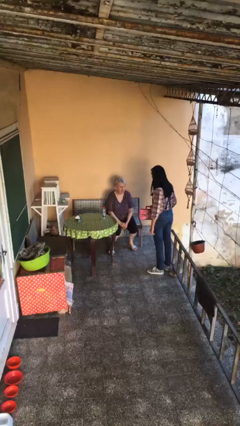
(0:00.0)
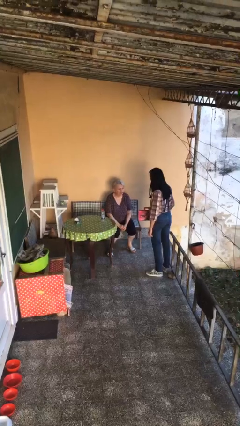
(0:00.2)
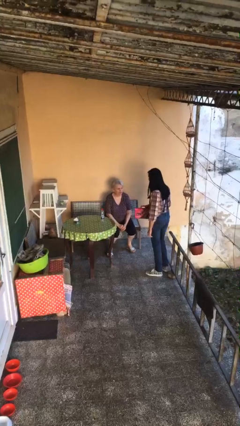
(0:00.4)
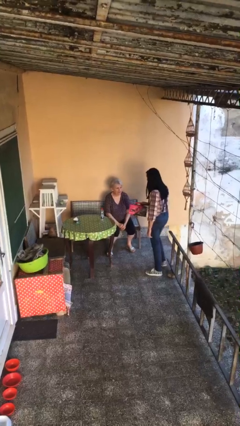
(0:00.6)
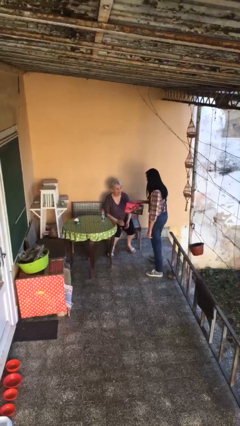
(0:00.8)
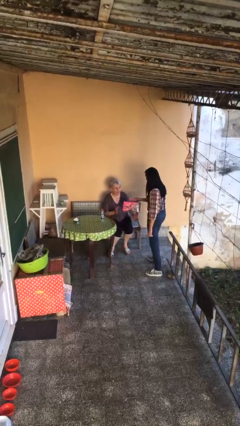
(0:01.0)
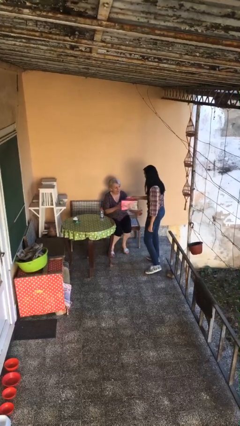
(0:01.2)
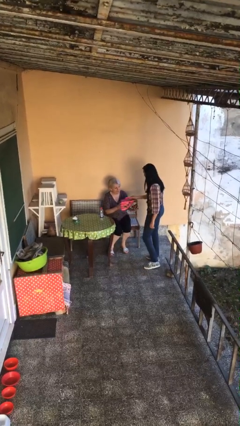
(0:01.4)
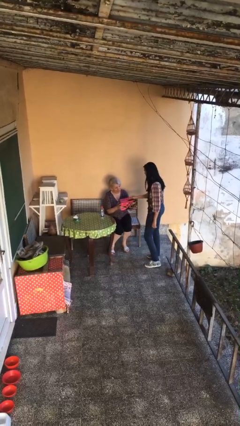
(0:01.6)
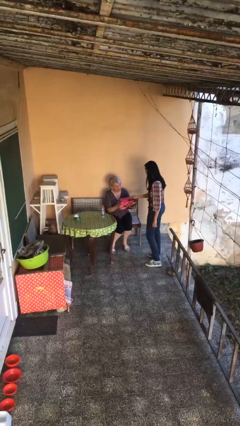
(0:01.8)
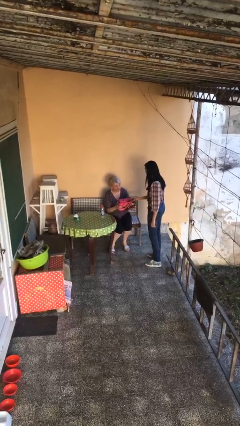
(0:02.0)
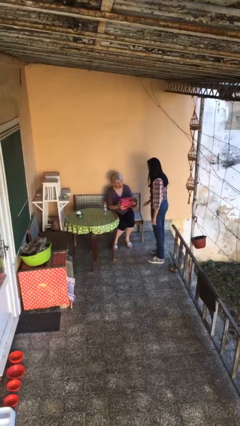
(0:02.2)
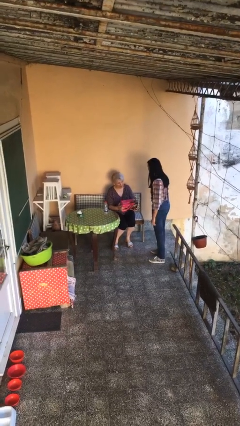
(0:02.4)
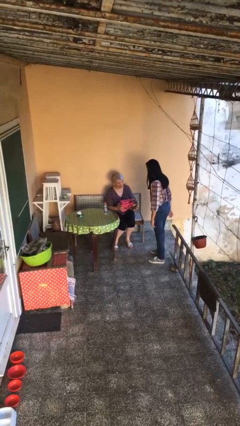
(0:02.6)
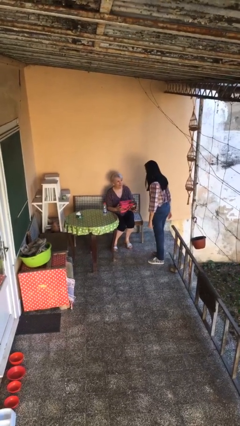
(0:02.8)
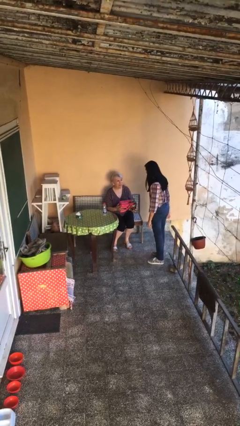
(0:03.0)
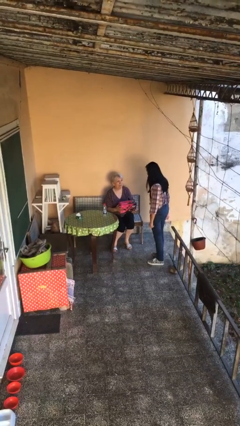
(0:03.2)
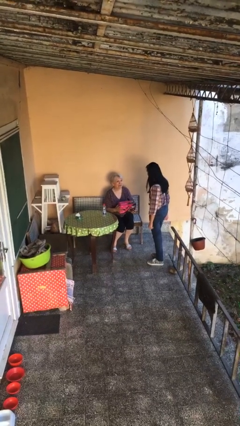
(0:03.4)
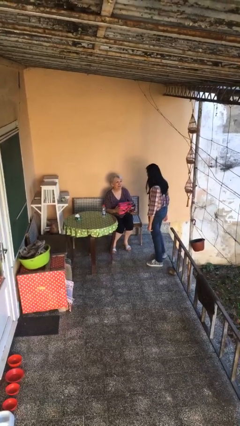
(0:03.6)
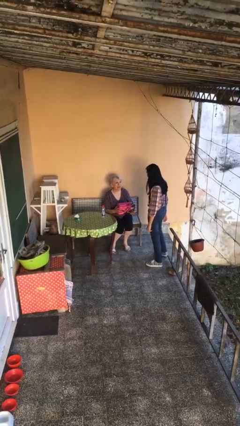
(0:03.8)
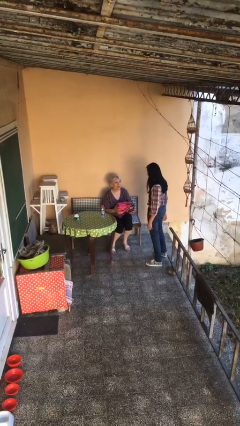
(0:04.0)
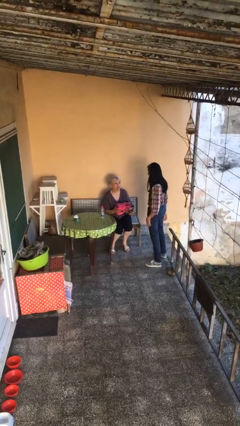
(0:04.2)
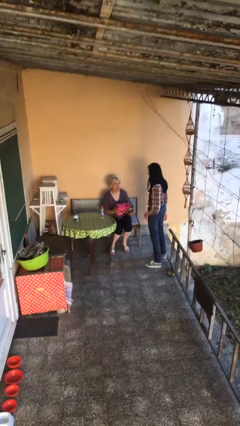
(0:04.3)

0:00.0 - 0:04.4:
person transfers object to person

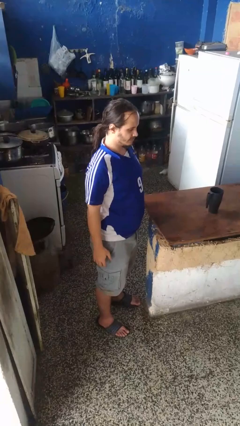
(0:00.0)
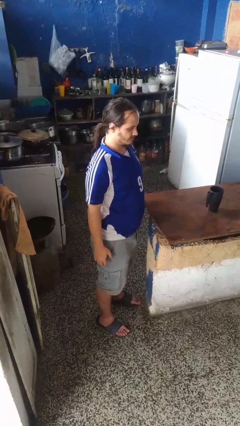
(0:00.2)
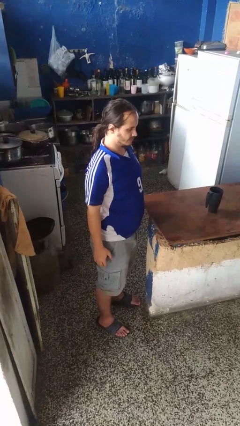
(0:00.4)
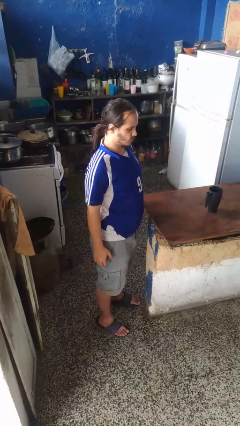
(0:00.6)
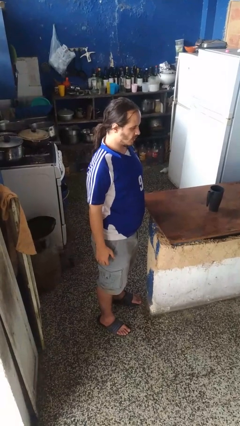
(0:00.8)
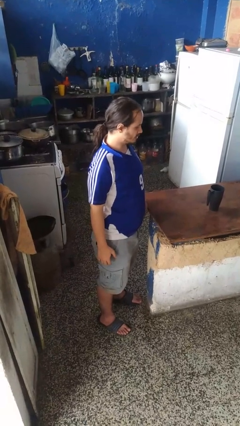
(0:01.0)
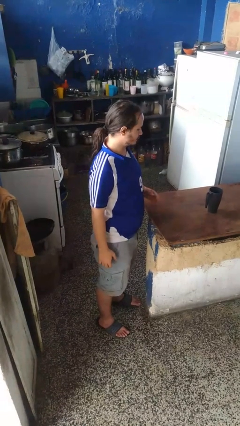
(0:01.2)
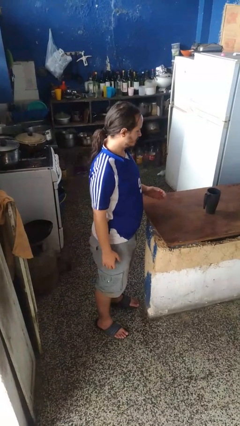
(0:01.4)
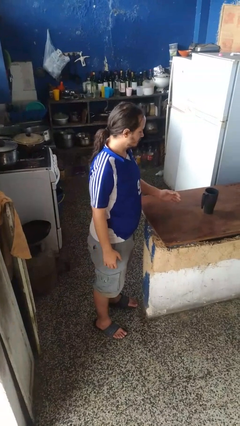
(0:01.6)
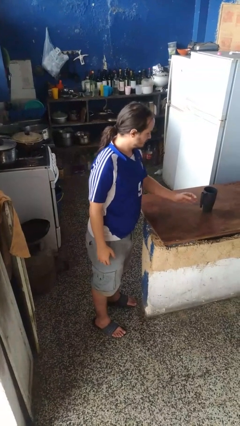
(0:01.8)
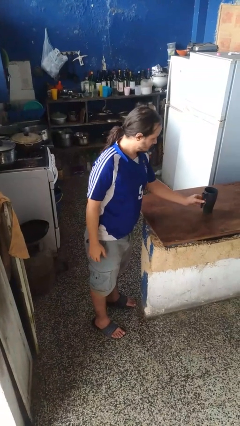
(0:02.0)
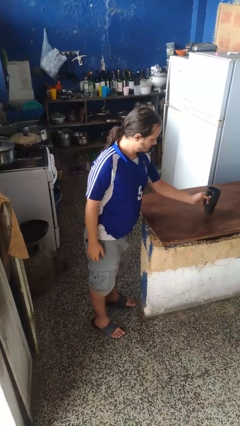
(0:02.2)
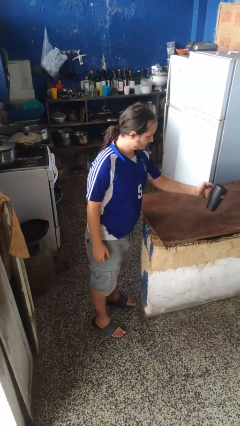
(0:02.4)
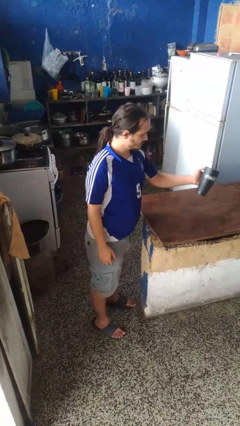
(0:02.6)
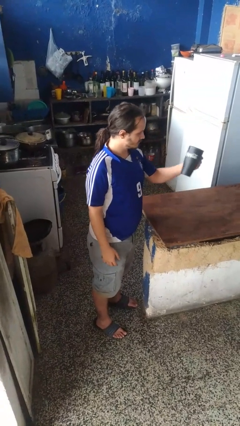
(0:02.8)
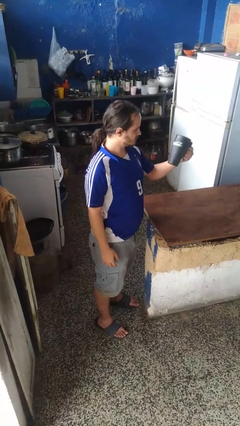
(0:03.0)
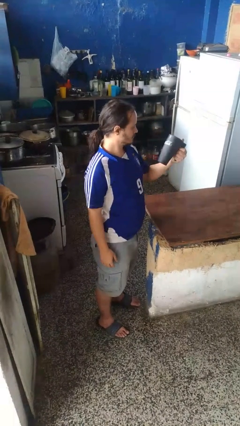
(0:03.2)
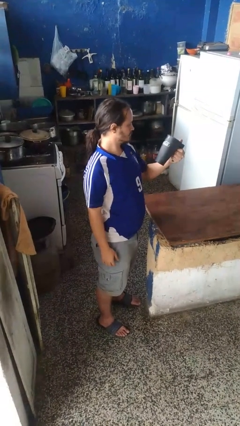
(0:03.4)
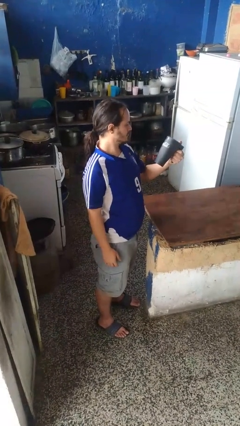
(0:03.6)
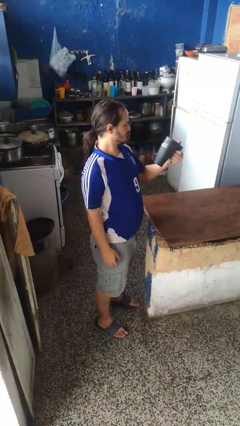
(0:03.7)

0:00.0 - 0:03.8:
person picks up object from countertop

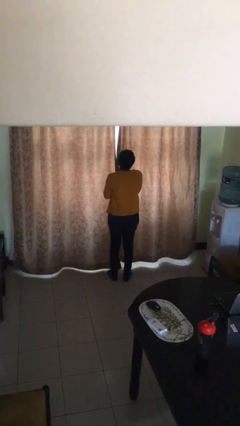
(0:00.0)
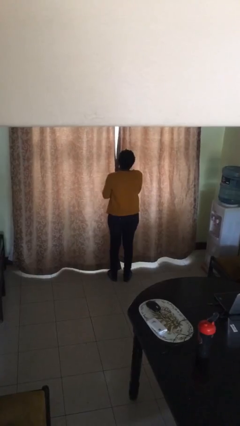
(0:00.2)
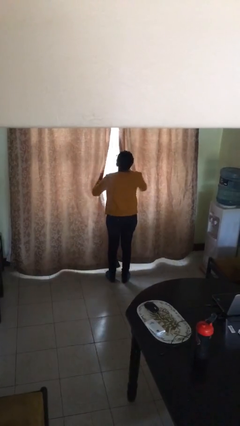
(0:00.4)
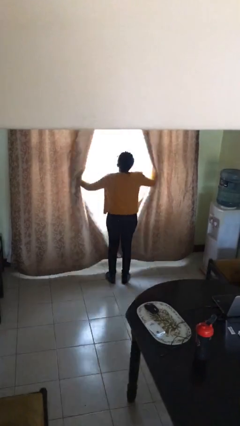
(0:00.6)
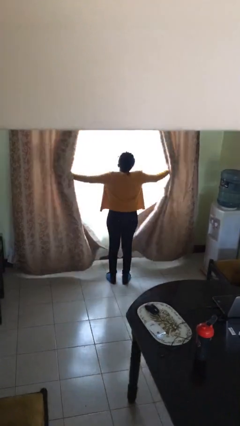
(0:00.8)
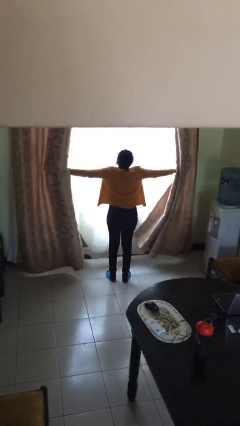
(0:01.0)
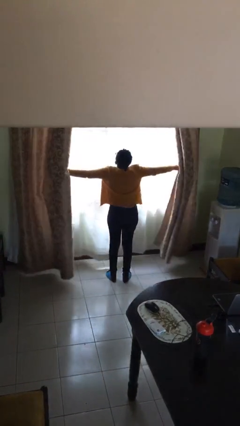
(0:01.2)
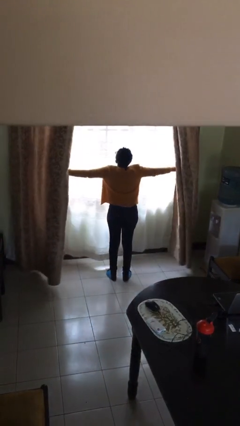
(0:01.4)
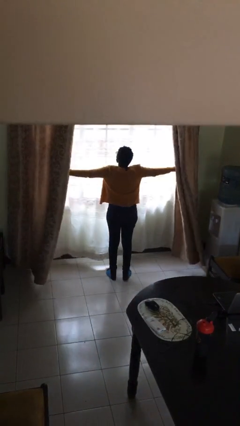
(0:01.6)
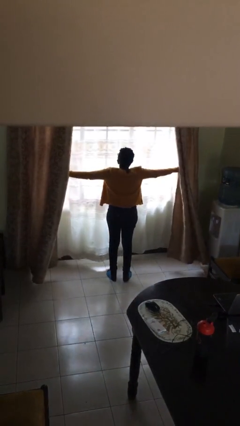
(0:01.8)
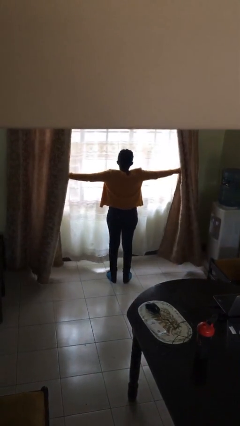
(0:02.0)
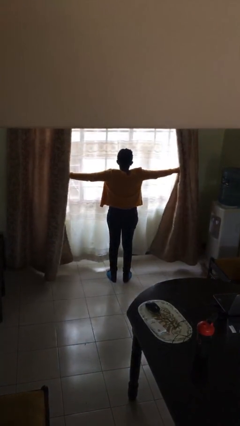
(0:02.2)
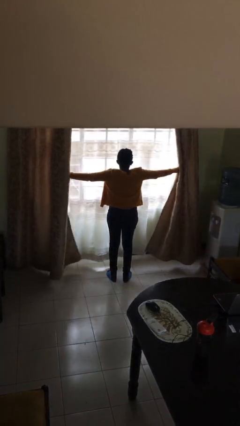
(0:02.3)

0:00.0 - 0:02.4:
person opens curtains

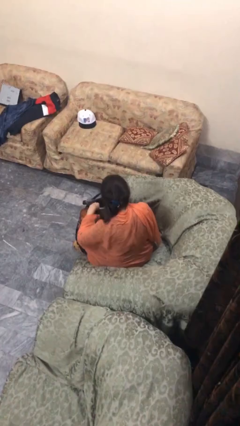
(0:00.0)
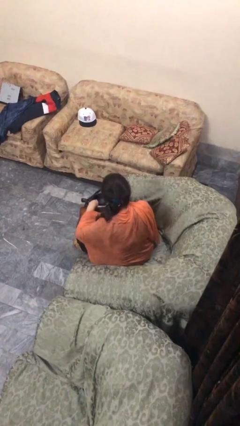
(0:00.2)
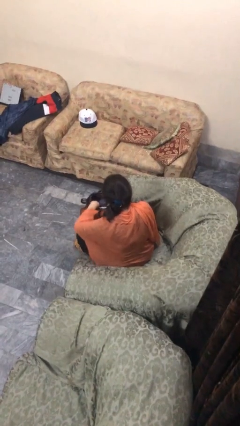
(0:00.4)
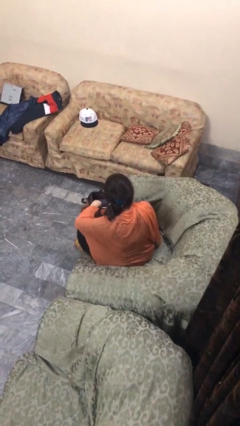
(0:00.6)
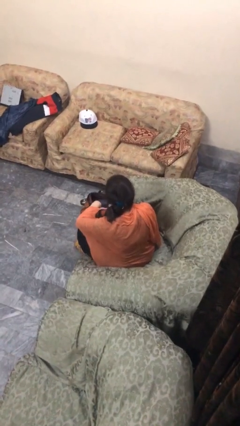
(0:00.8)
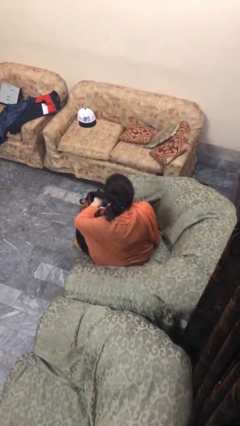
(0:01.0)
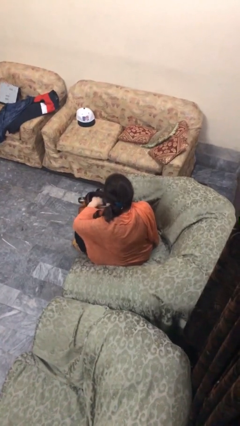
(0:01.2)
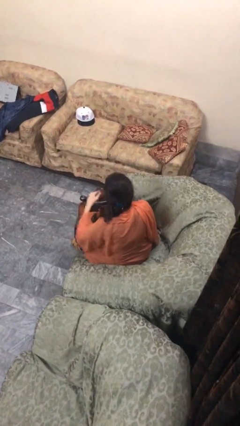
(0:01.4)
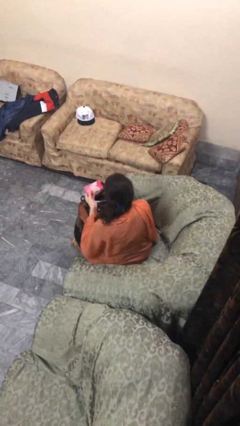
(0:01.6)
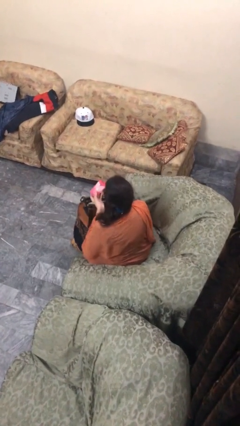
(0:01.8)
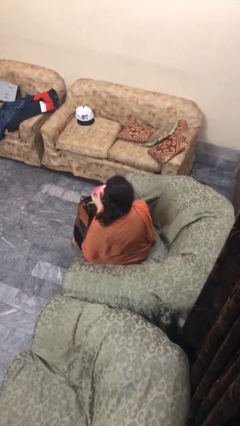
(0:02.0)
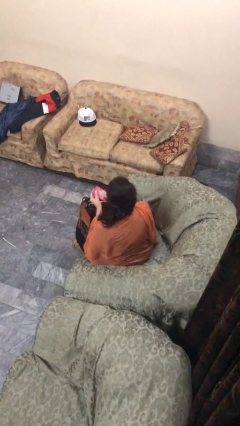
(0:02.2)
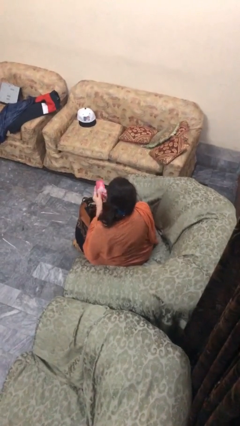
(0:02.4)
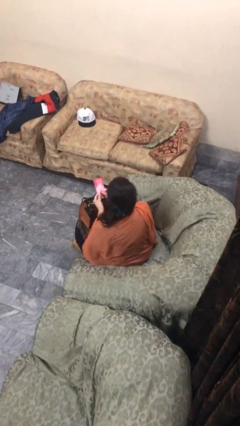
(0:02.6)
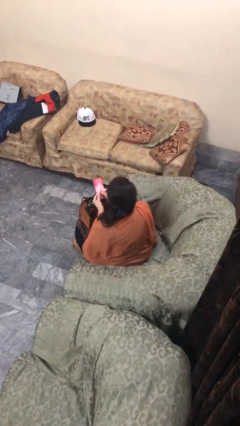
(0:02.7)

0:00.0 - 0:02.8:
person takes object from purse

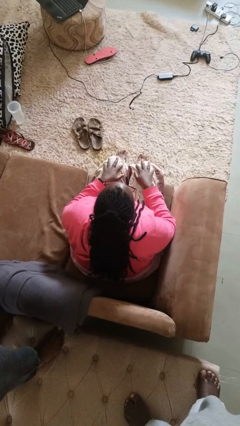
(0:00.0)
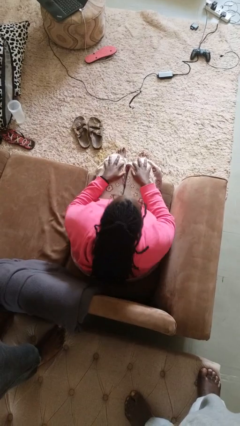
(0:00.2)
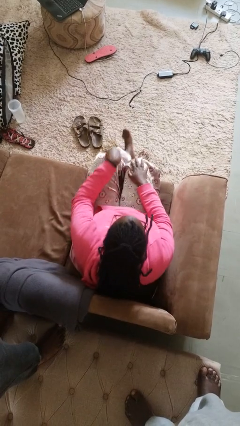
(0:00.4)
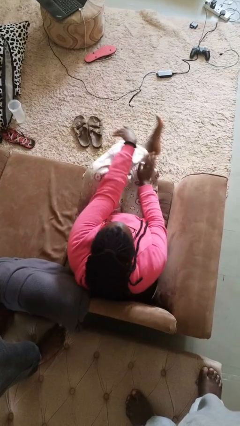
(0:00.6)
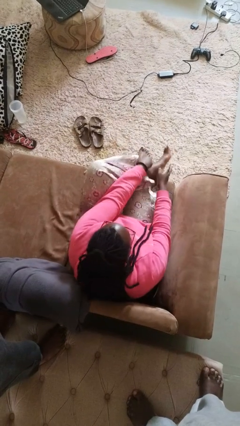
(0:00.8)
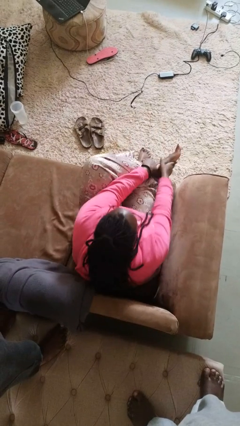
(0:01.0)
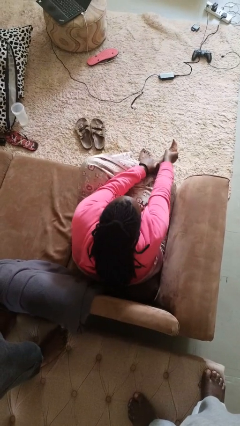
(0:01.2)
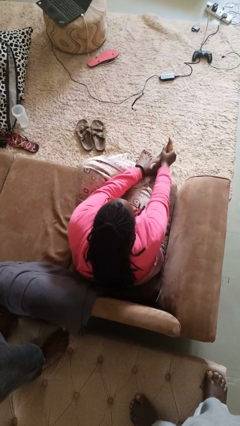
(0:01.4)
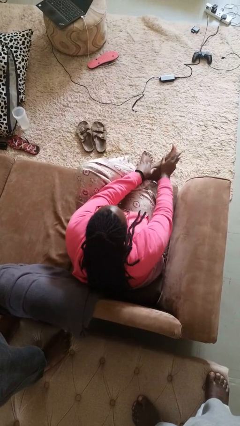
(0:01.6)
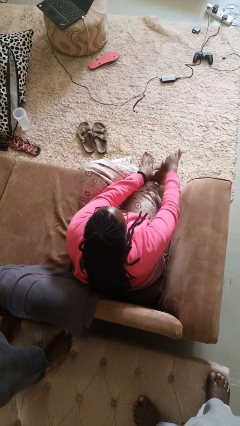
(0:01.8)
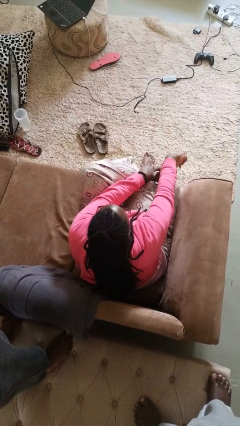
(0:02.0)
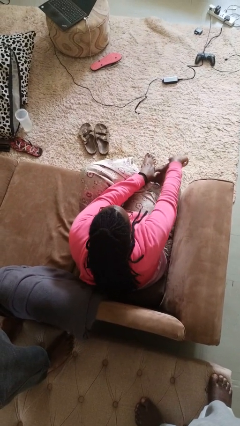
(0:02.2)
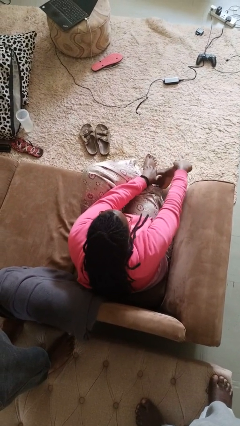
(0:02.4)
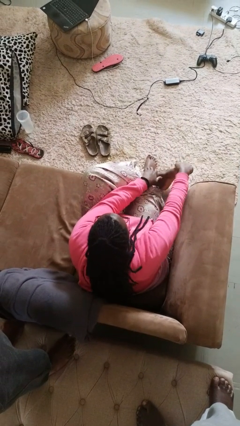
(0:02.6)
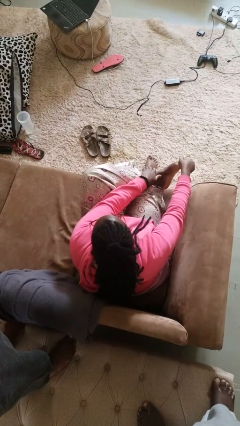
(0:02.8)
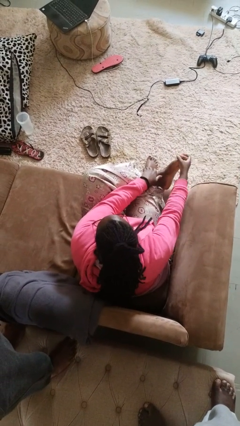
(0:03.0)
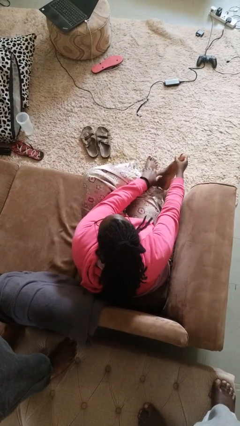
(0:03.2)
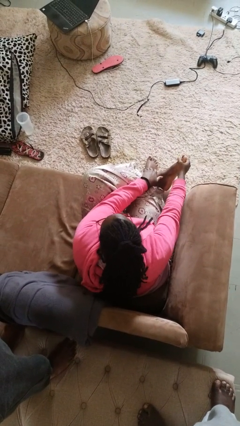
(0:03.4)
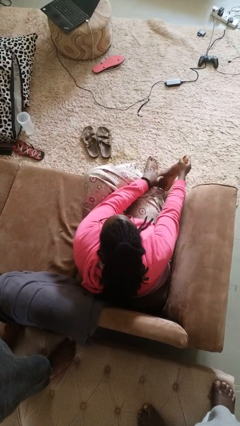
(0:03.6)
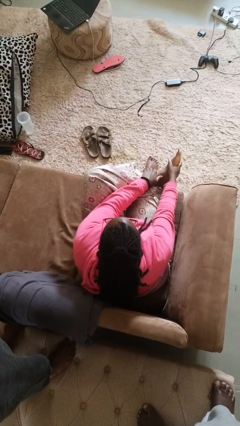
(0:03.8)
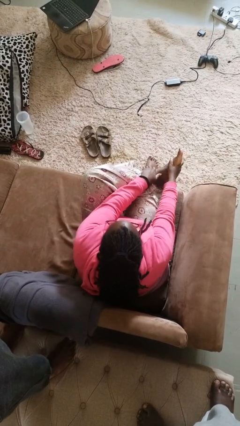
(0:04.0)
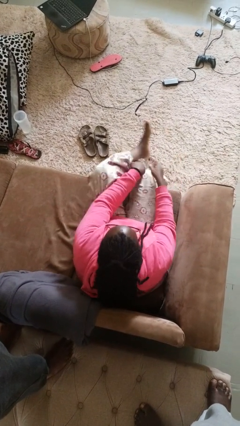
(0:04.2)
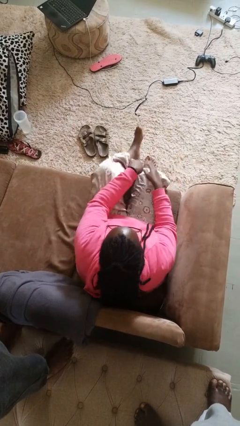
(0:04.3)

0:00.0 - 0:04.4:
person rubs foot
